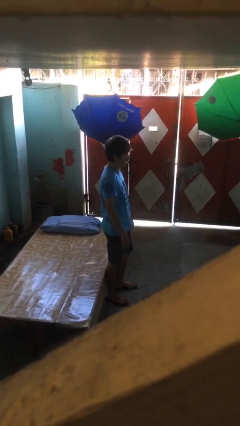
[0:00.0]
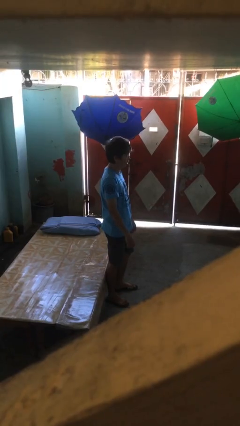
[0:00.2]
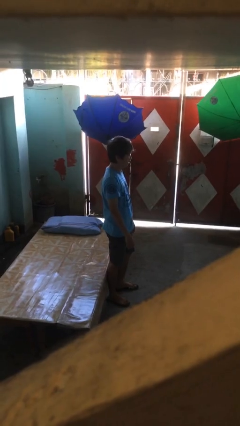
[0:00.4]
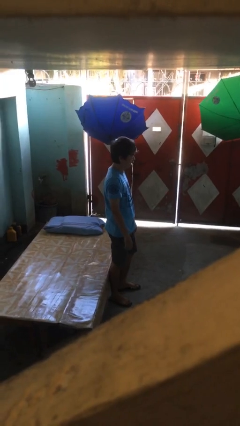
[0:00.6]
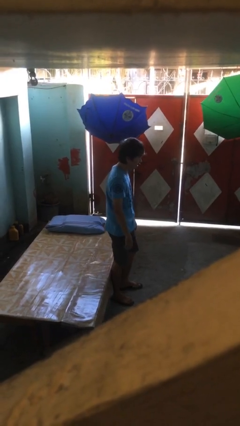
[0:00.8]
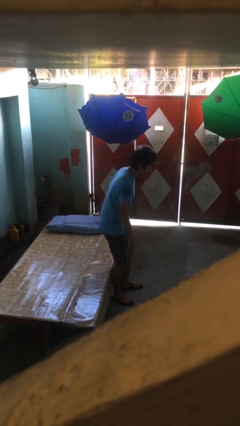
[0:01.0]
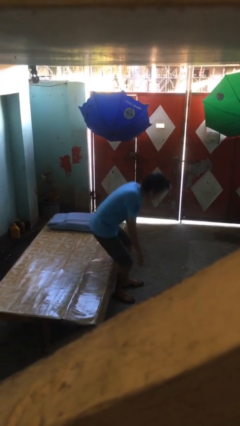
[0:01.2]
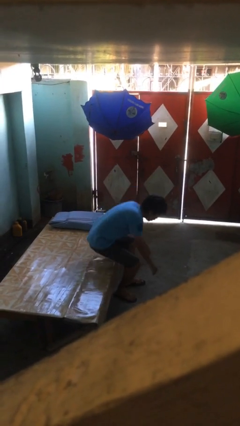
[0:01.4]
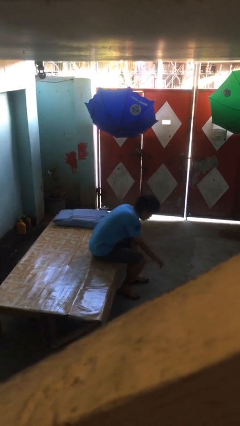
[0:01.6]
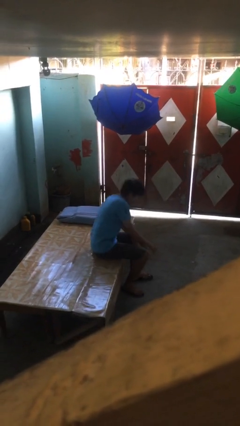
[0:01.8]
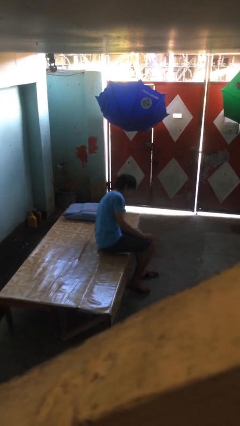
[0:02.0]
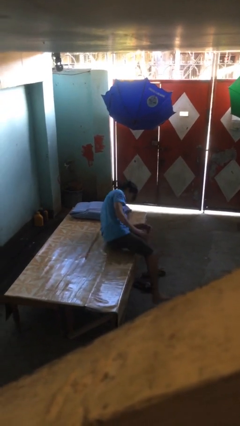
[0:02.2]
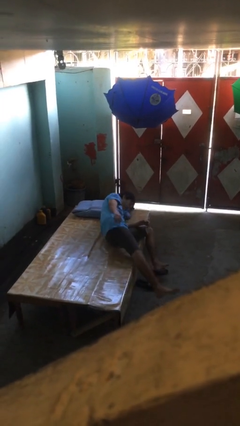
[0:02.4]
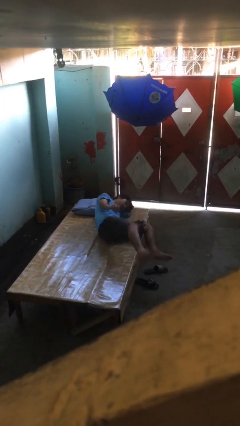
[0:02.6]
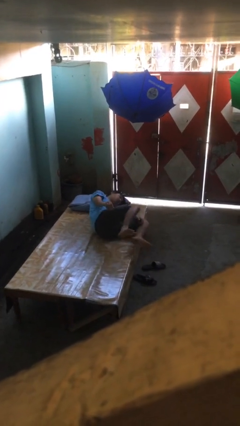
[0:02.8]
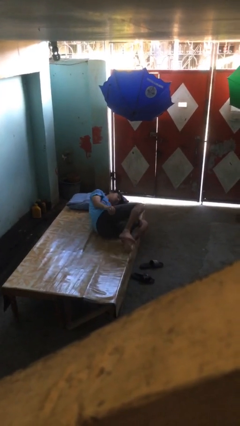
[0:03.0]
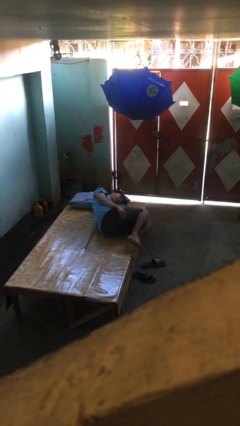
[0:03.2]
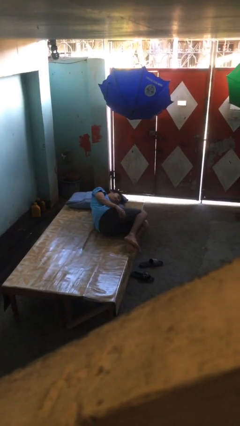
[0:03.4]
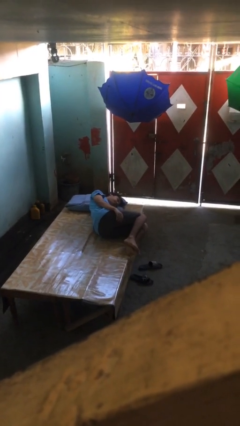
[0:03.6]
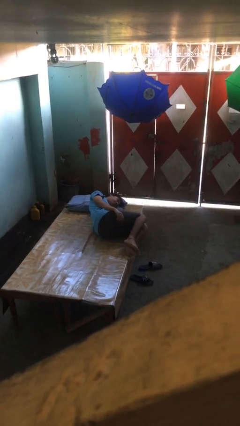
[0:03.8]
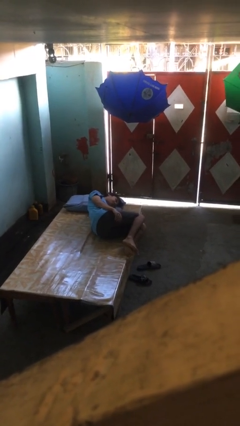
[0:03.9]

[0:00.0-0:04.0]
person lies down on bed

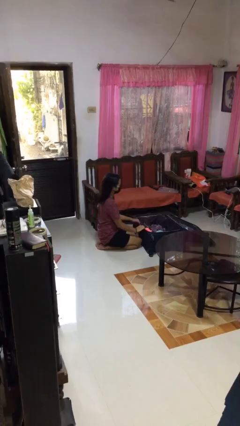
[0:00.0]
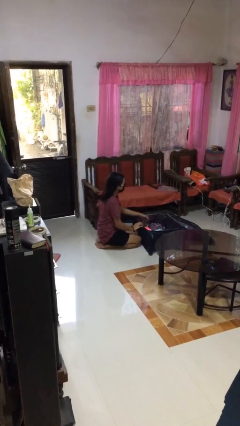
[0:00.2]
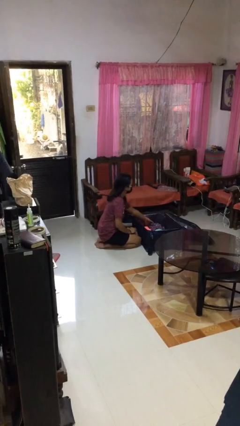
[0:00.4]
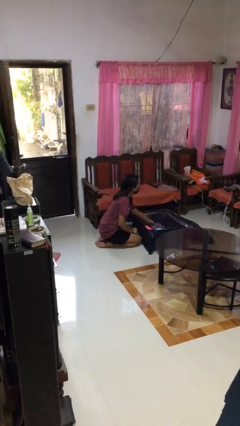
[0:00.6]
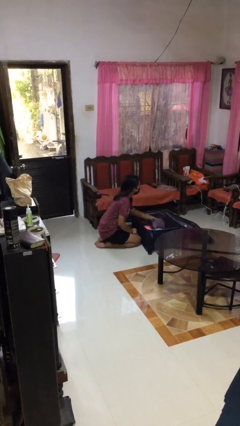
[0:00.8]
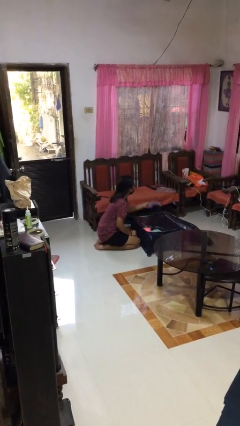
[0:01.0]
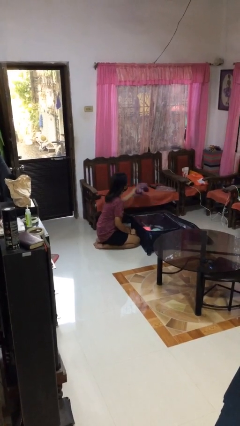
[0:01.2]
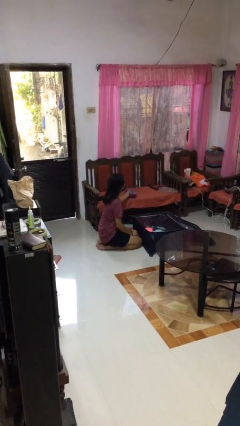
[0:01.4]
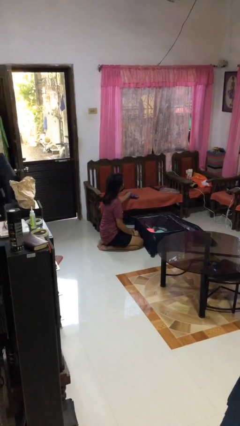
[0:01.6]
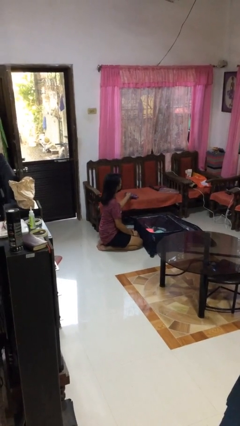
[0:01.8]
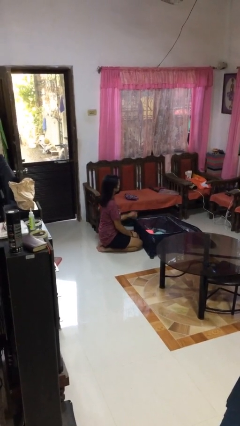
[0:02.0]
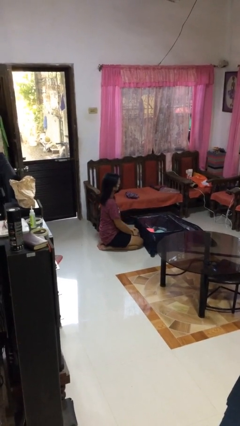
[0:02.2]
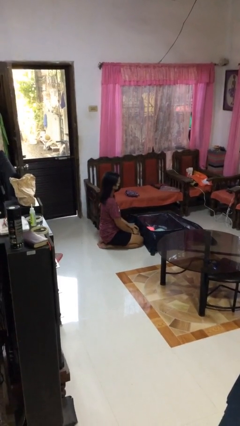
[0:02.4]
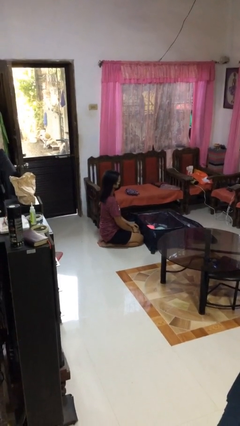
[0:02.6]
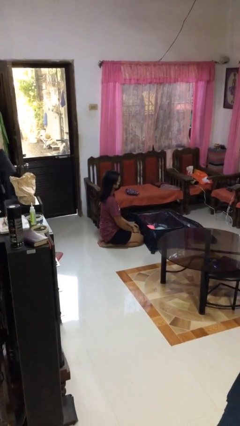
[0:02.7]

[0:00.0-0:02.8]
person unloads clothes from suitcase

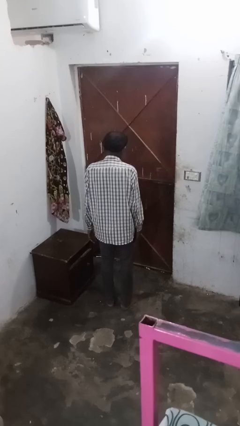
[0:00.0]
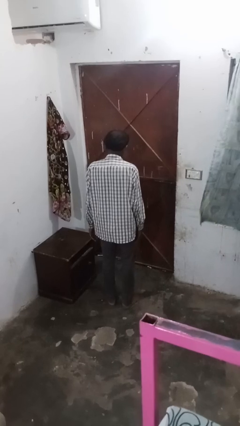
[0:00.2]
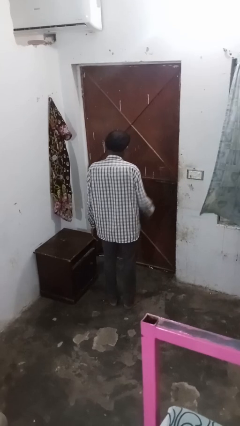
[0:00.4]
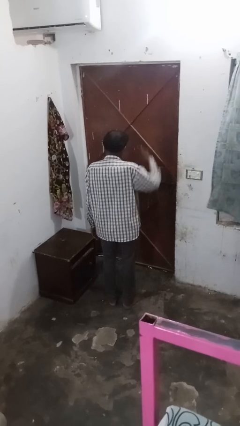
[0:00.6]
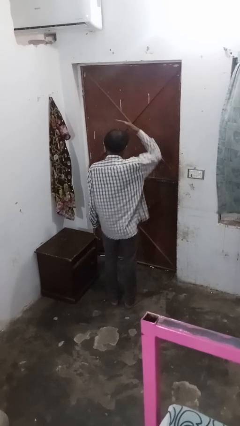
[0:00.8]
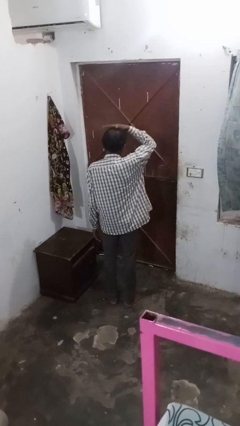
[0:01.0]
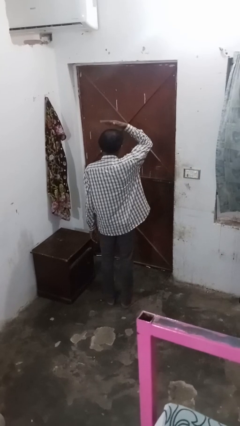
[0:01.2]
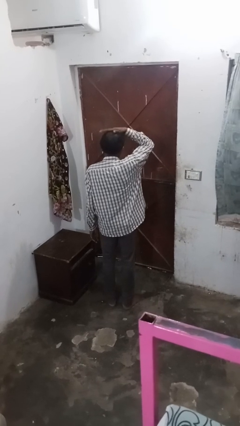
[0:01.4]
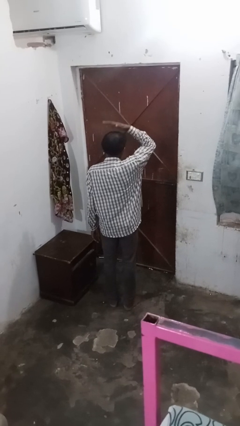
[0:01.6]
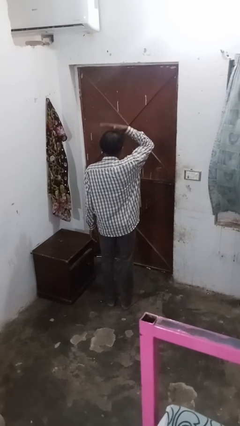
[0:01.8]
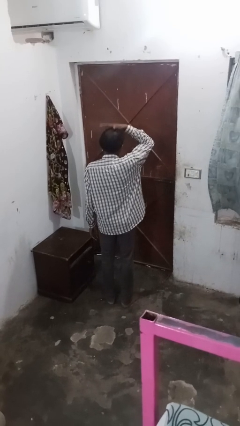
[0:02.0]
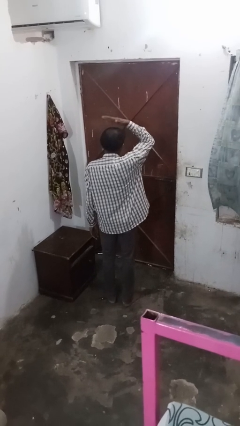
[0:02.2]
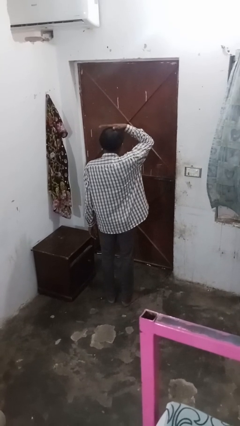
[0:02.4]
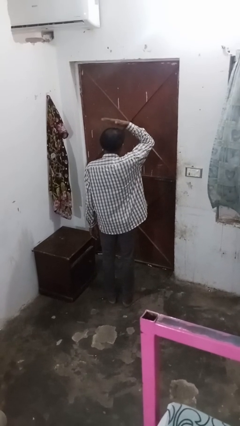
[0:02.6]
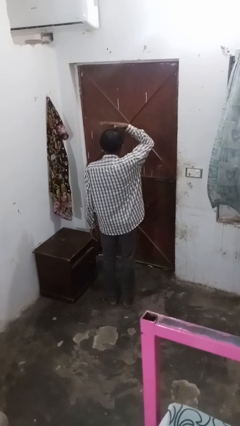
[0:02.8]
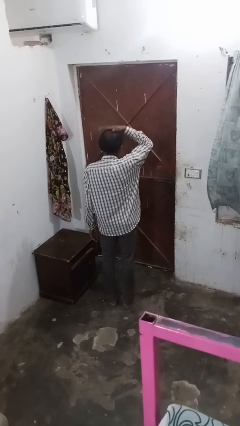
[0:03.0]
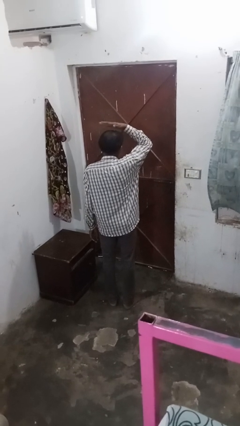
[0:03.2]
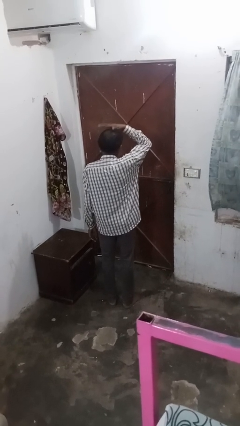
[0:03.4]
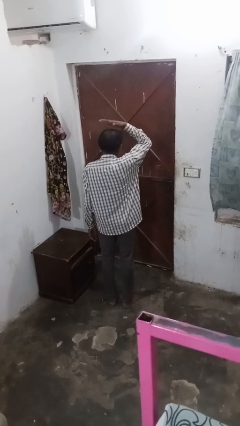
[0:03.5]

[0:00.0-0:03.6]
person pats head

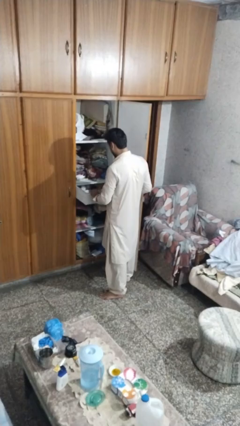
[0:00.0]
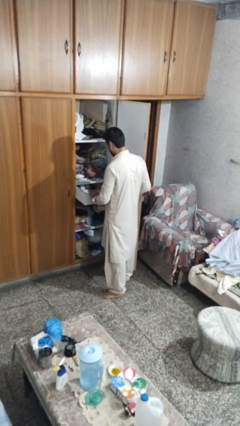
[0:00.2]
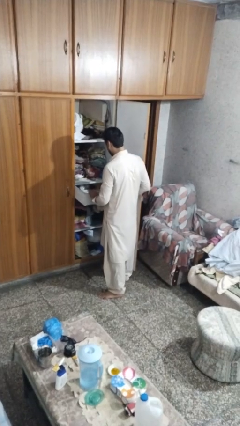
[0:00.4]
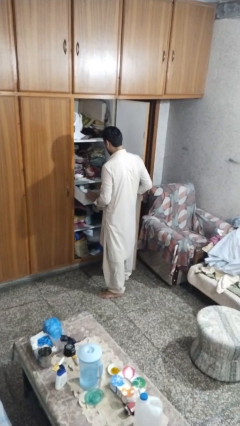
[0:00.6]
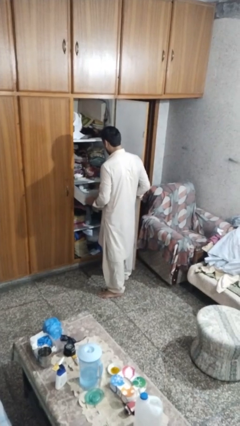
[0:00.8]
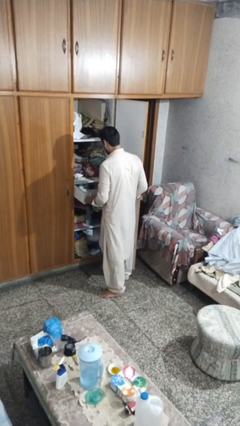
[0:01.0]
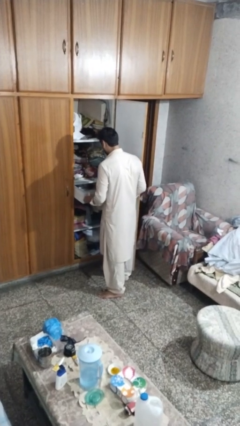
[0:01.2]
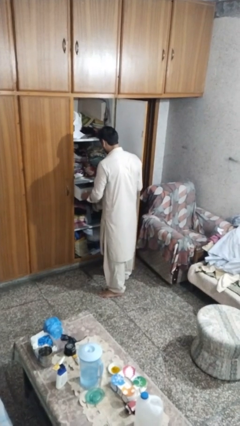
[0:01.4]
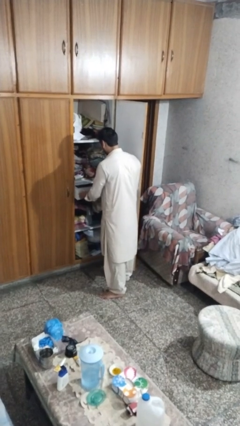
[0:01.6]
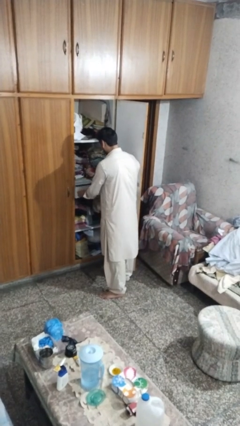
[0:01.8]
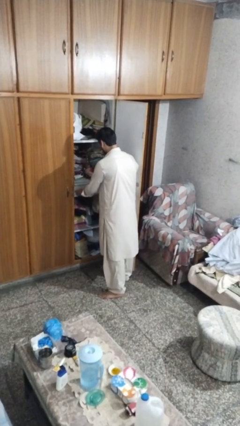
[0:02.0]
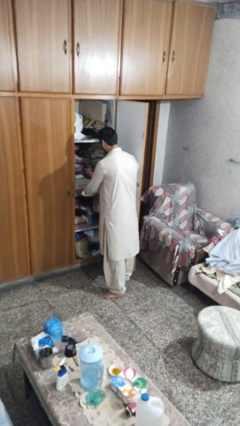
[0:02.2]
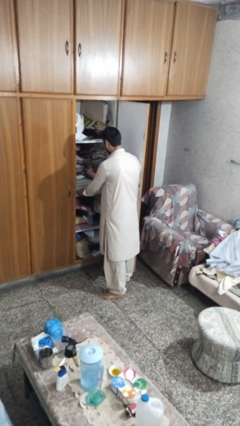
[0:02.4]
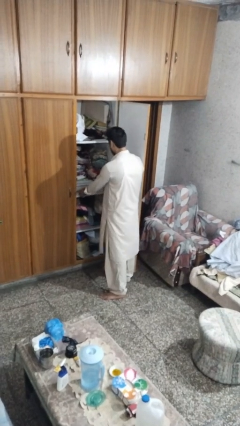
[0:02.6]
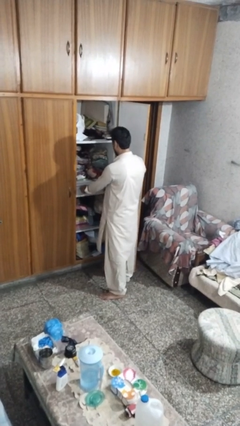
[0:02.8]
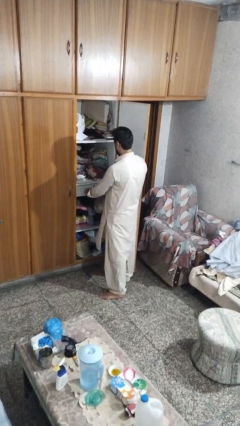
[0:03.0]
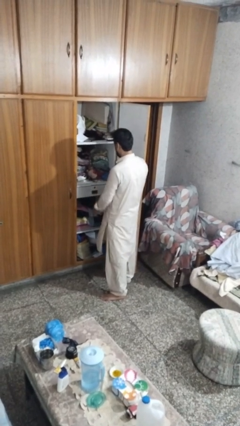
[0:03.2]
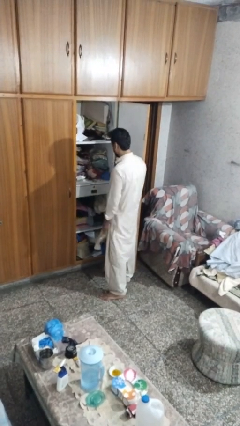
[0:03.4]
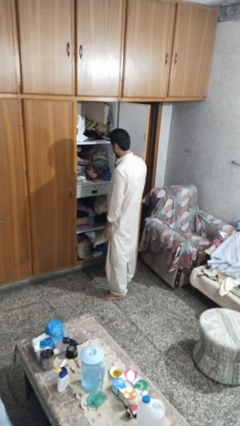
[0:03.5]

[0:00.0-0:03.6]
person closes dresser drawer

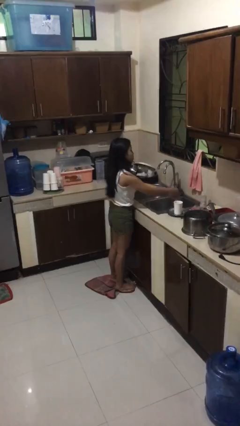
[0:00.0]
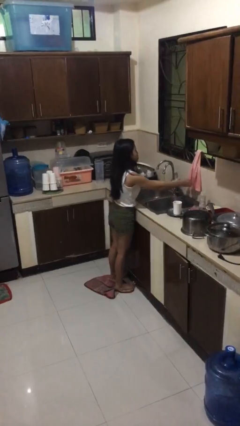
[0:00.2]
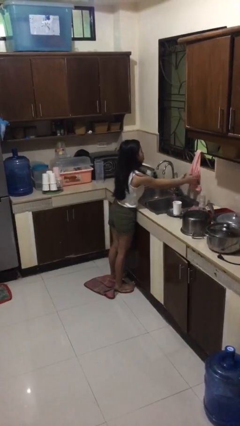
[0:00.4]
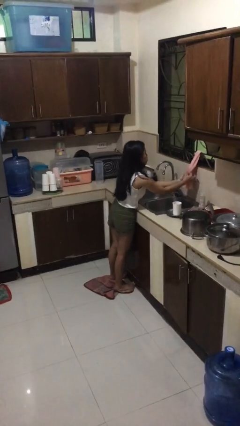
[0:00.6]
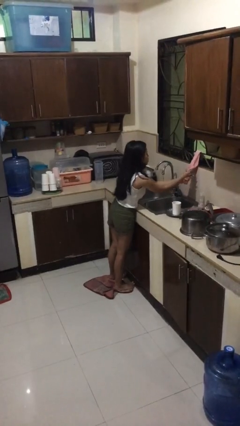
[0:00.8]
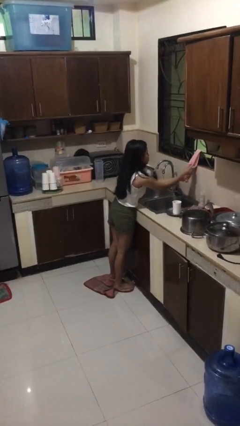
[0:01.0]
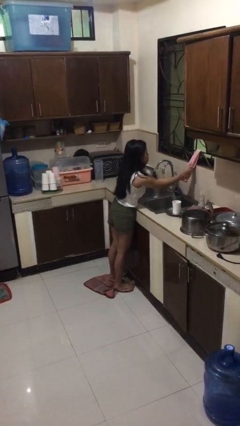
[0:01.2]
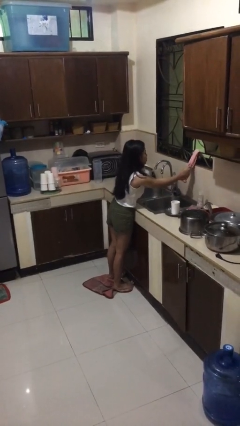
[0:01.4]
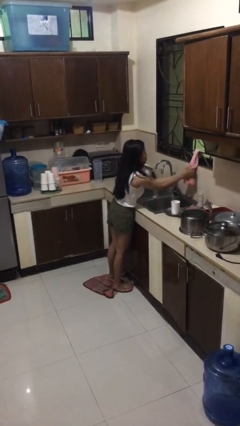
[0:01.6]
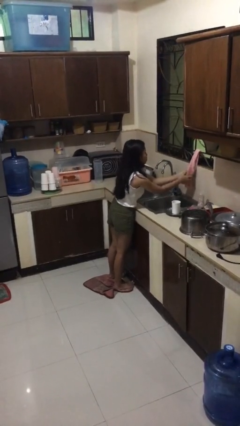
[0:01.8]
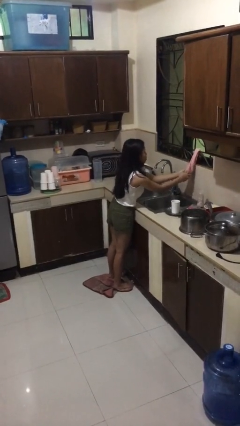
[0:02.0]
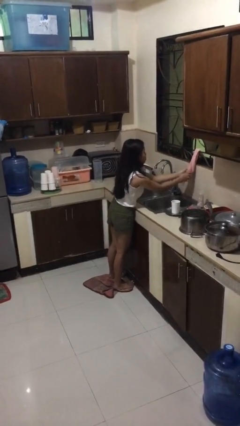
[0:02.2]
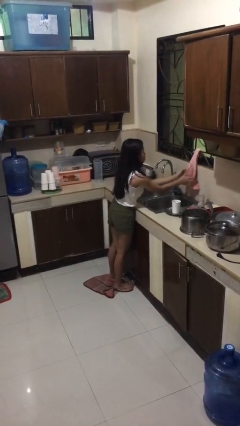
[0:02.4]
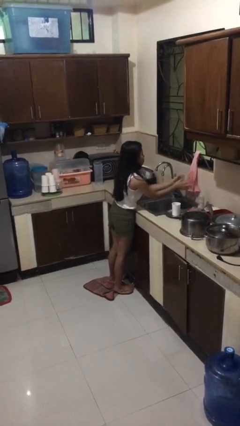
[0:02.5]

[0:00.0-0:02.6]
person dries hands with towel

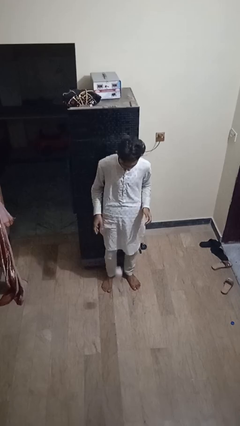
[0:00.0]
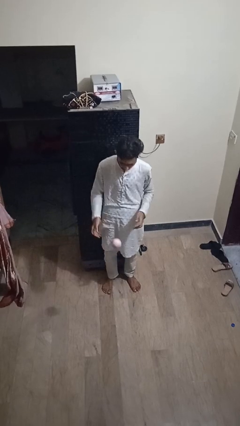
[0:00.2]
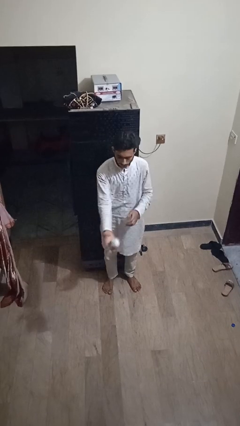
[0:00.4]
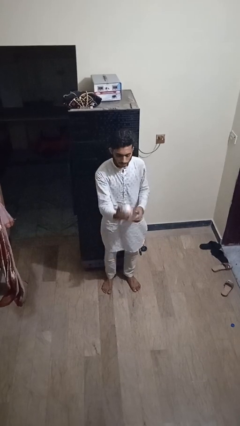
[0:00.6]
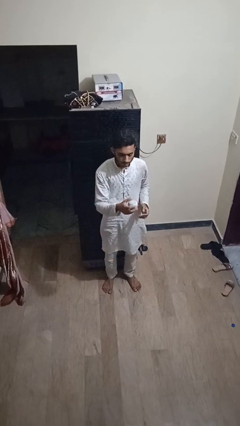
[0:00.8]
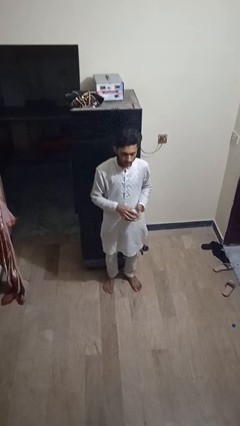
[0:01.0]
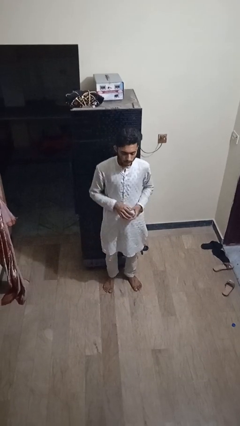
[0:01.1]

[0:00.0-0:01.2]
person bounces ball on floor
